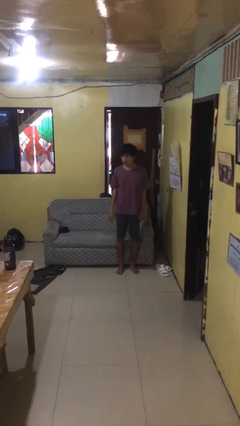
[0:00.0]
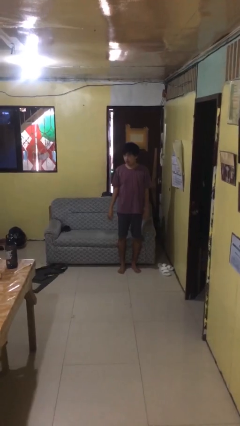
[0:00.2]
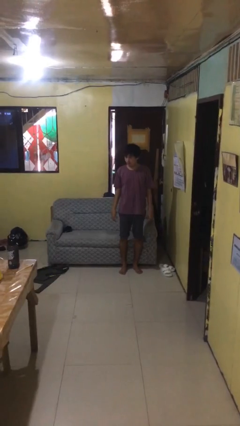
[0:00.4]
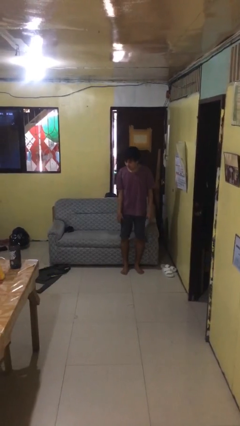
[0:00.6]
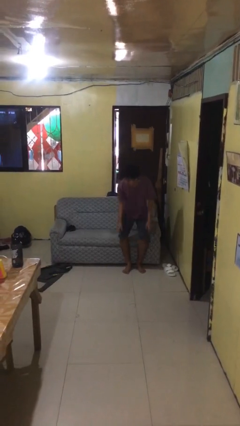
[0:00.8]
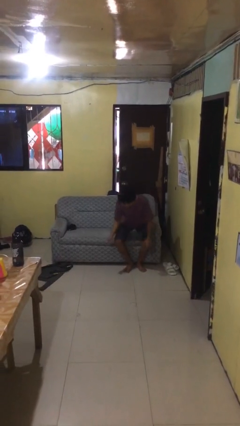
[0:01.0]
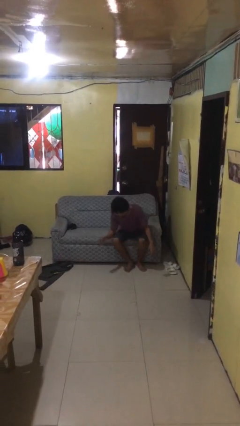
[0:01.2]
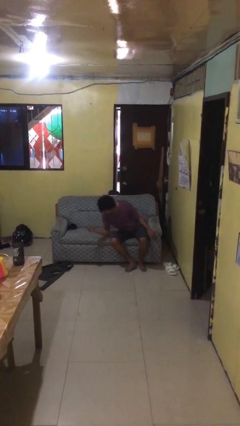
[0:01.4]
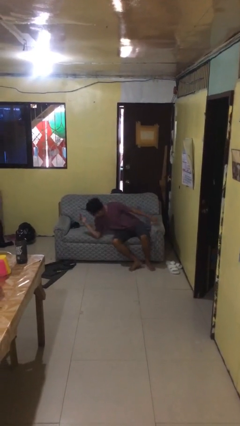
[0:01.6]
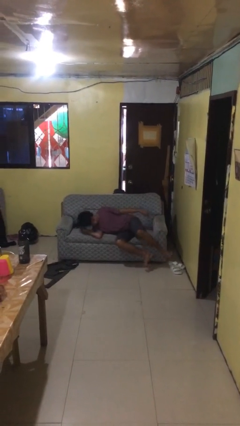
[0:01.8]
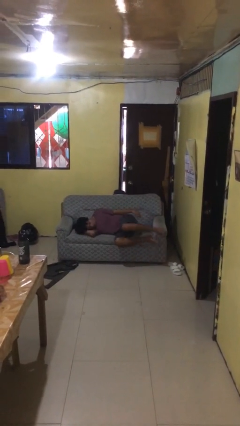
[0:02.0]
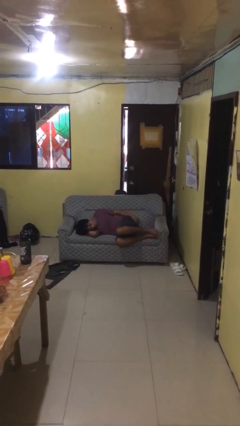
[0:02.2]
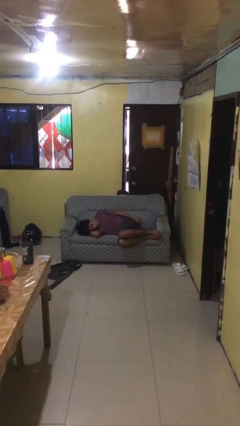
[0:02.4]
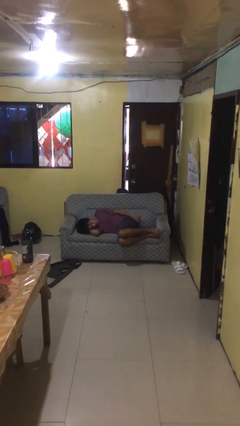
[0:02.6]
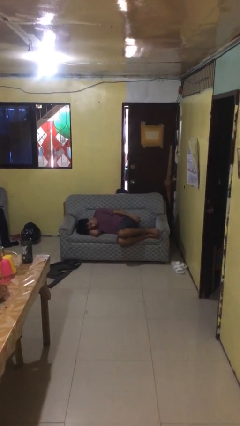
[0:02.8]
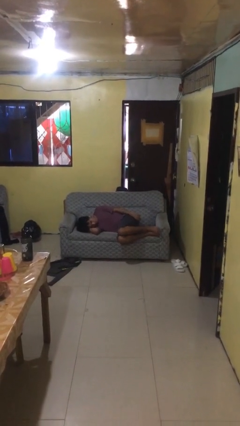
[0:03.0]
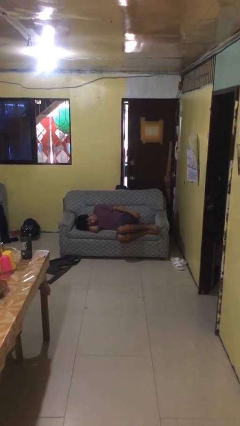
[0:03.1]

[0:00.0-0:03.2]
person lies down on couch

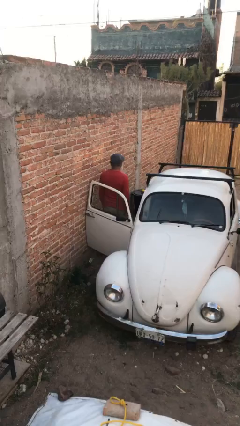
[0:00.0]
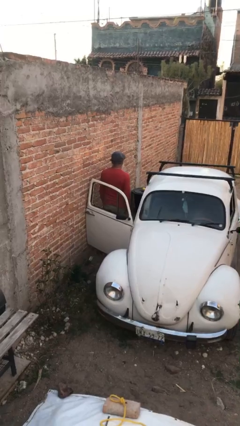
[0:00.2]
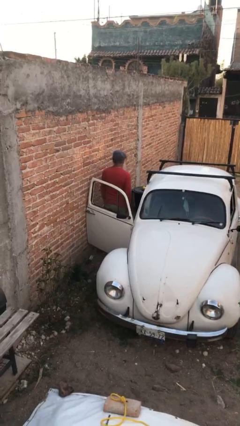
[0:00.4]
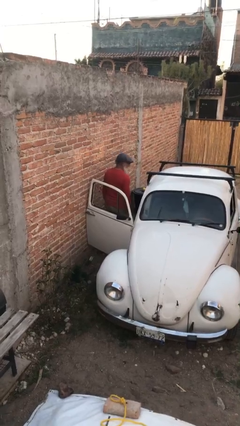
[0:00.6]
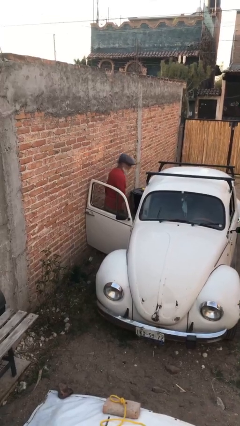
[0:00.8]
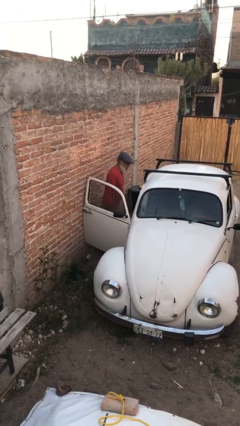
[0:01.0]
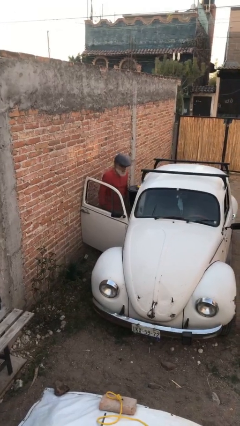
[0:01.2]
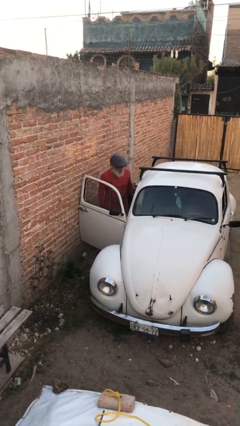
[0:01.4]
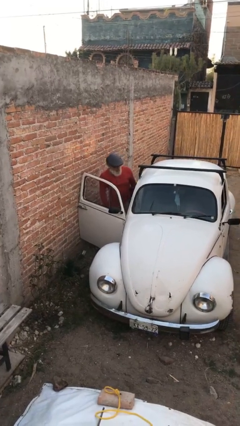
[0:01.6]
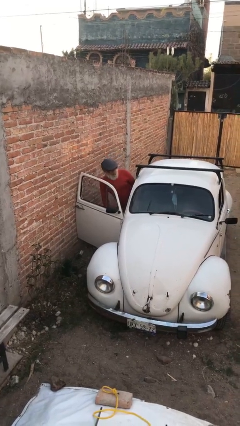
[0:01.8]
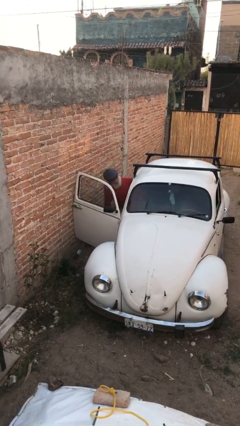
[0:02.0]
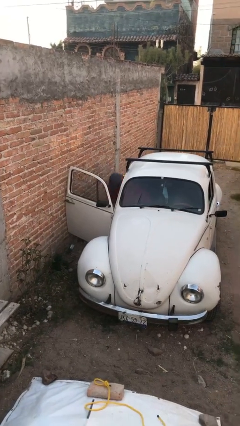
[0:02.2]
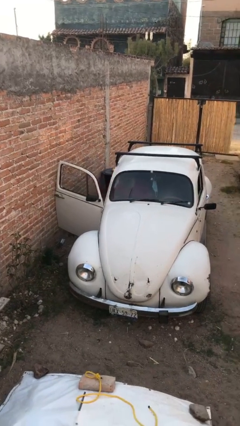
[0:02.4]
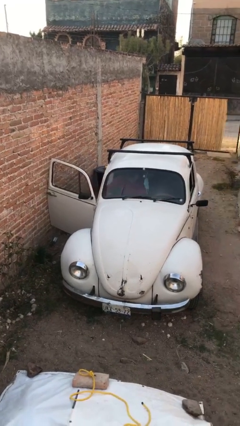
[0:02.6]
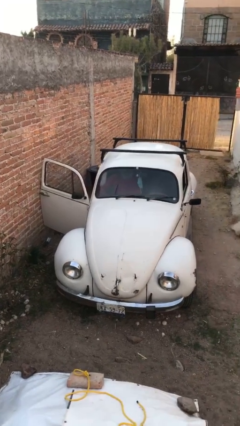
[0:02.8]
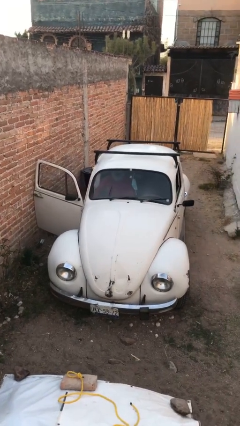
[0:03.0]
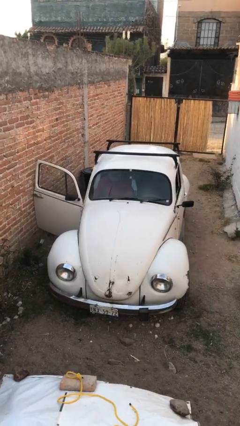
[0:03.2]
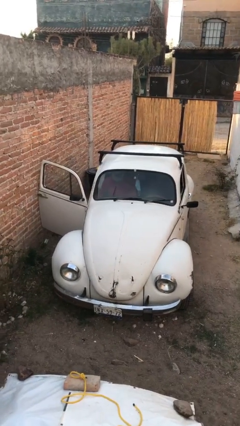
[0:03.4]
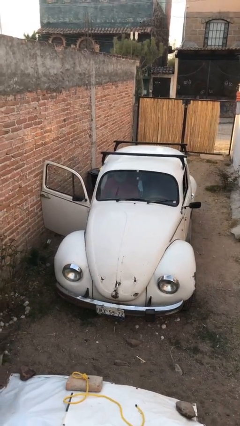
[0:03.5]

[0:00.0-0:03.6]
person enters car

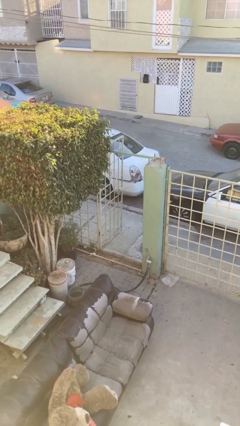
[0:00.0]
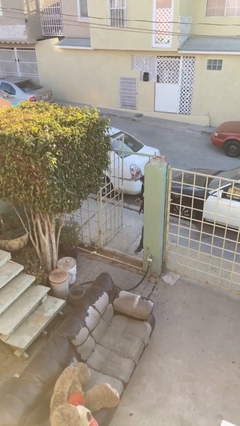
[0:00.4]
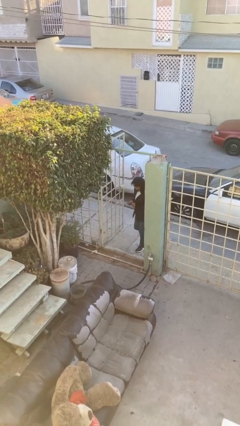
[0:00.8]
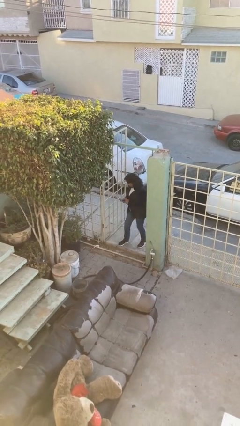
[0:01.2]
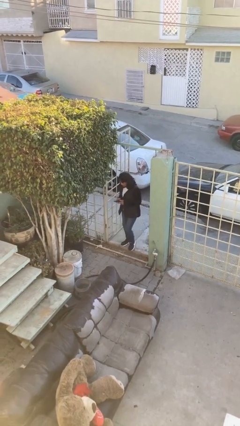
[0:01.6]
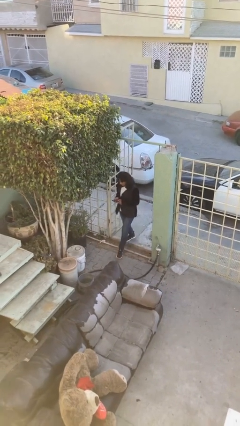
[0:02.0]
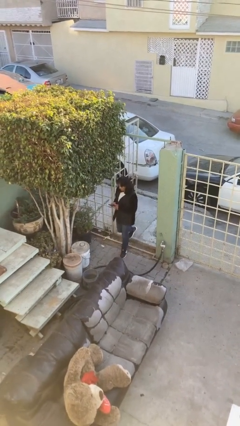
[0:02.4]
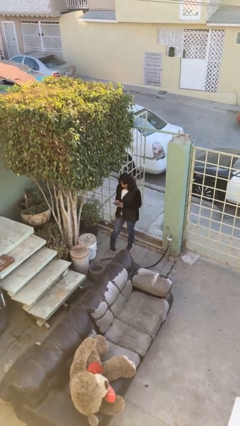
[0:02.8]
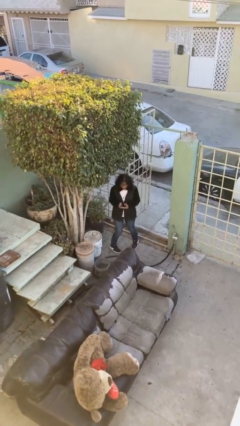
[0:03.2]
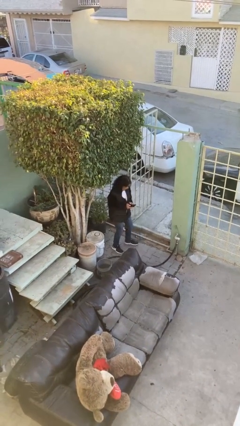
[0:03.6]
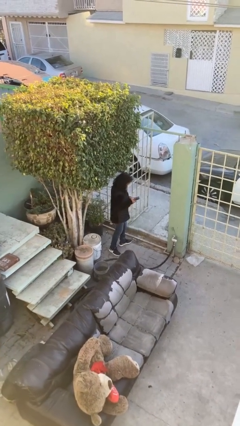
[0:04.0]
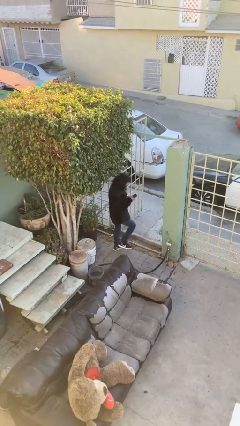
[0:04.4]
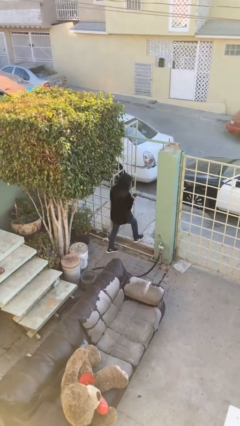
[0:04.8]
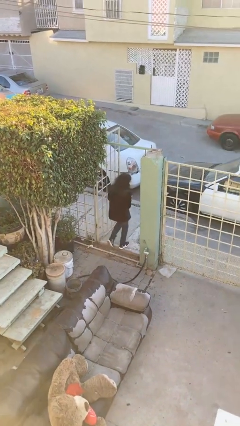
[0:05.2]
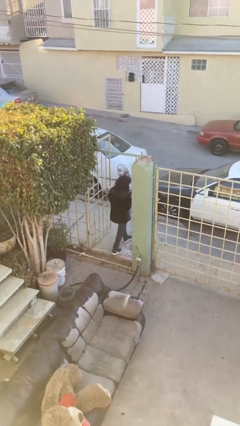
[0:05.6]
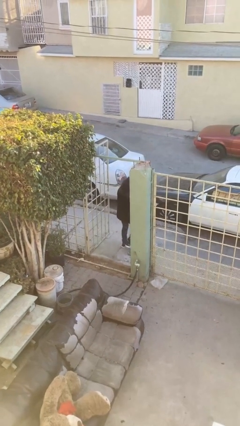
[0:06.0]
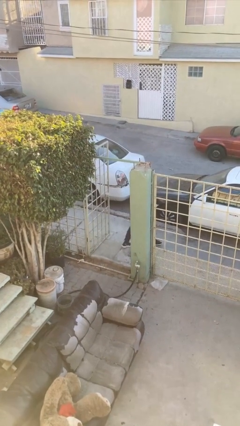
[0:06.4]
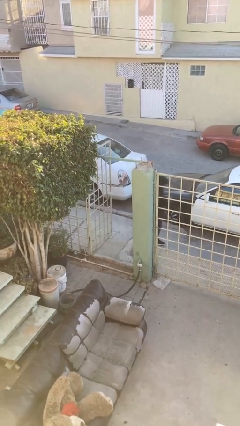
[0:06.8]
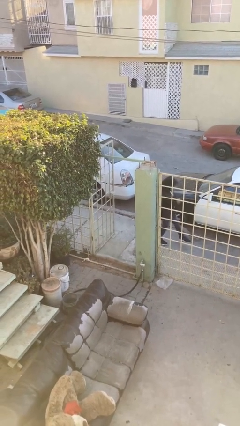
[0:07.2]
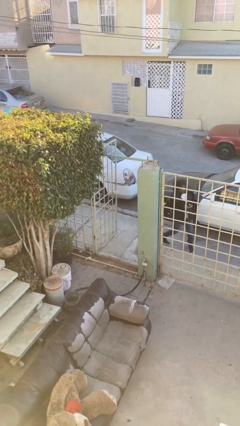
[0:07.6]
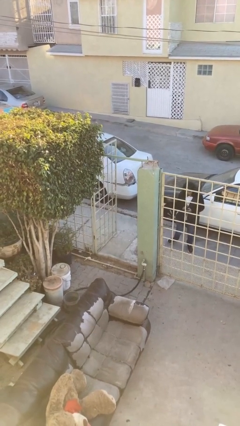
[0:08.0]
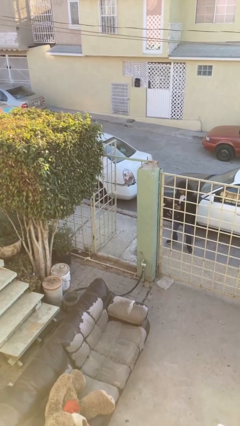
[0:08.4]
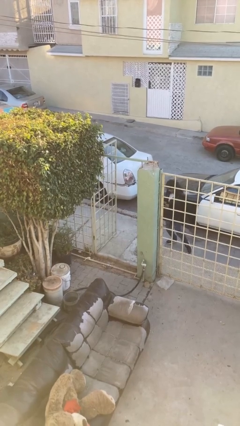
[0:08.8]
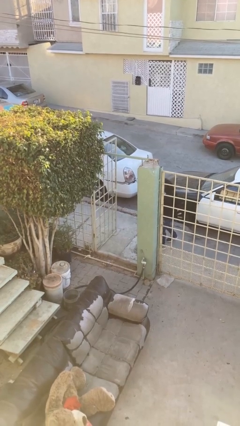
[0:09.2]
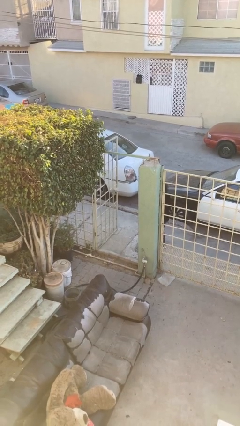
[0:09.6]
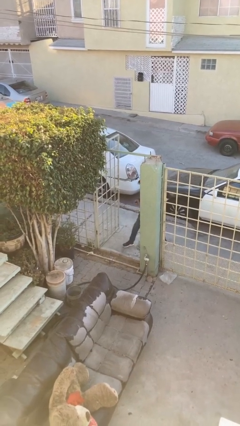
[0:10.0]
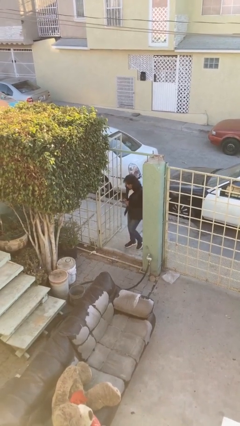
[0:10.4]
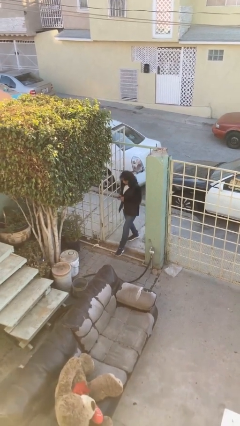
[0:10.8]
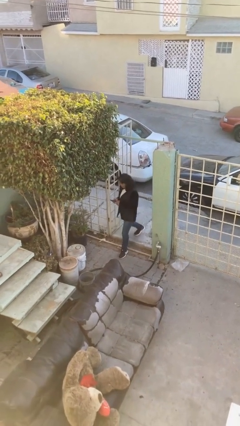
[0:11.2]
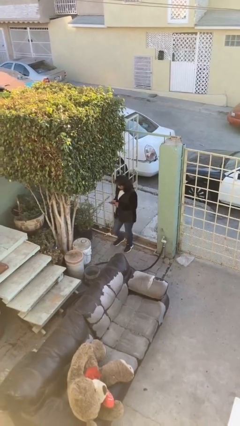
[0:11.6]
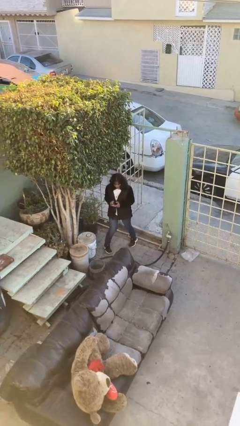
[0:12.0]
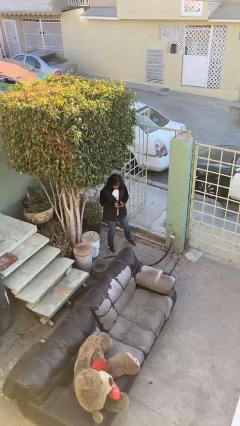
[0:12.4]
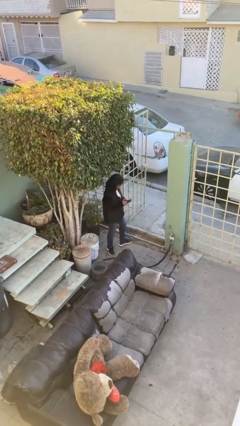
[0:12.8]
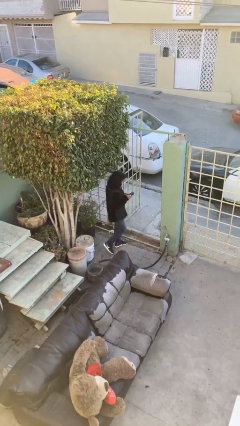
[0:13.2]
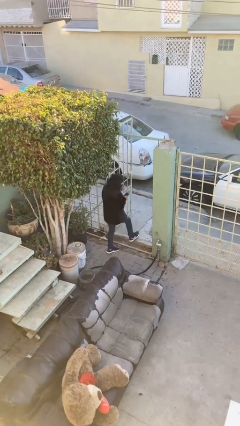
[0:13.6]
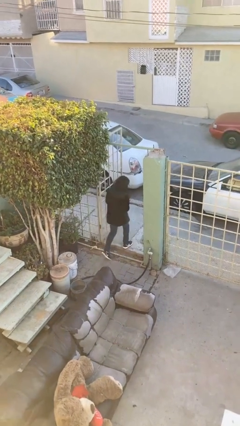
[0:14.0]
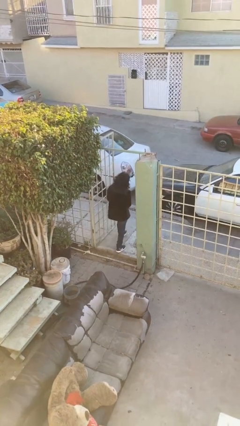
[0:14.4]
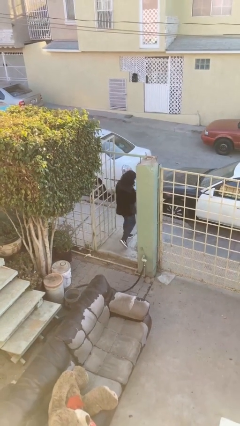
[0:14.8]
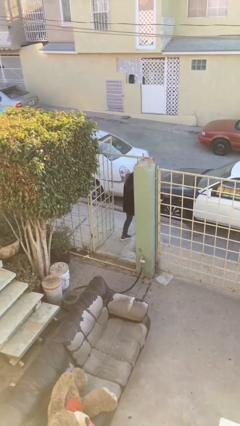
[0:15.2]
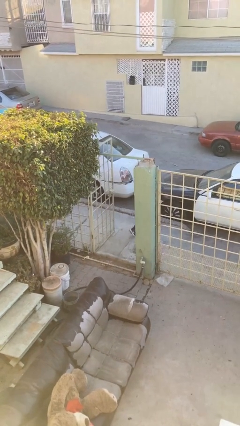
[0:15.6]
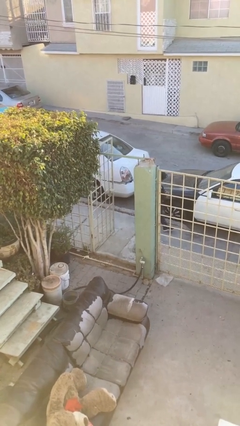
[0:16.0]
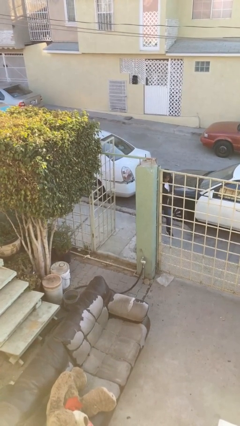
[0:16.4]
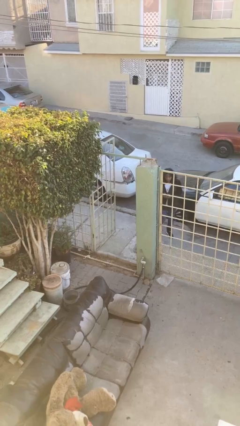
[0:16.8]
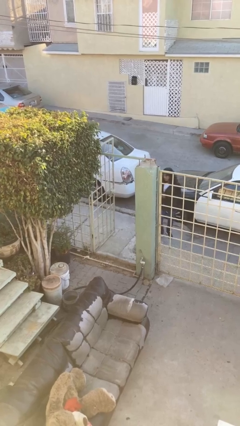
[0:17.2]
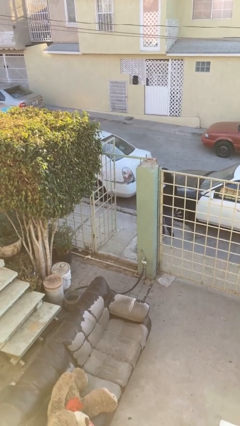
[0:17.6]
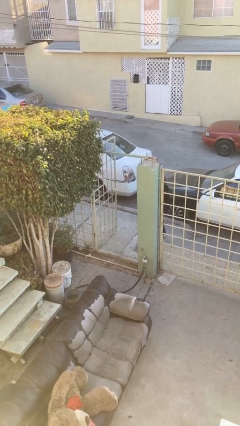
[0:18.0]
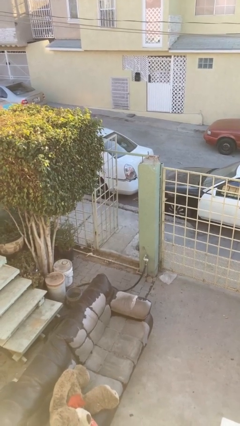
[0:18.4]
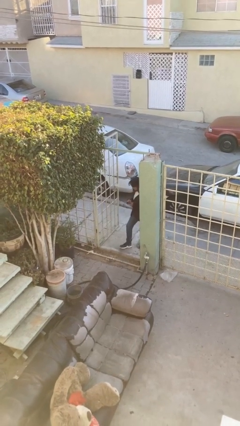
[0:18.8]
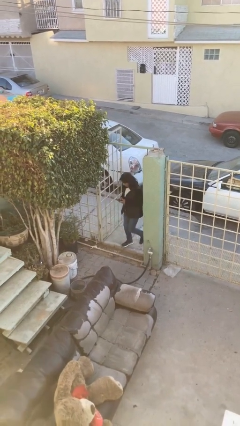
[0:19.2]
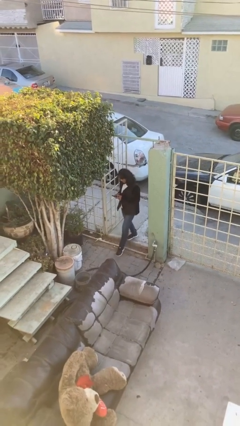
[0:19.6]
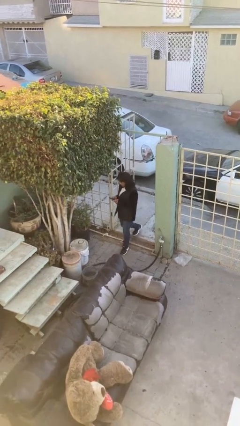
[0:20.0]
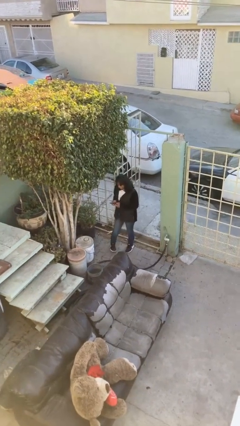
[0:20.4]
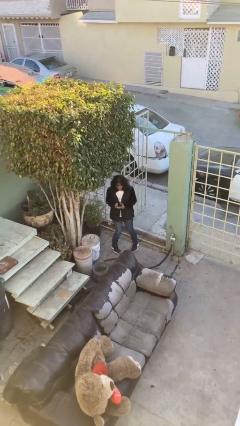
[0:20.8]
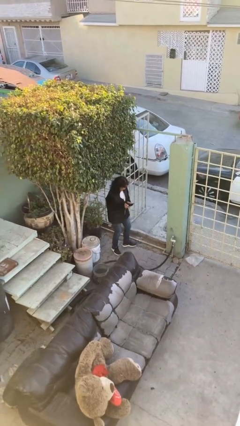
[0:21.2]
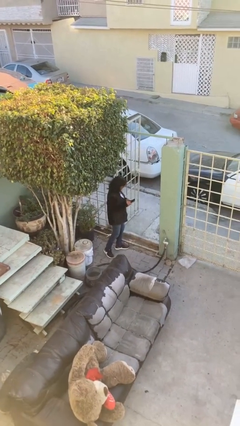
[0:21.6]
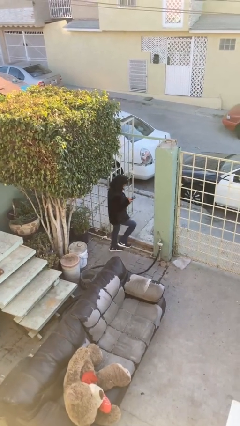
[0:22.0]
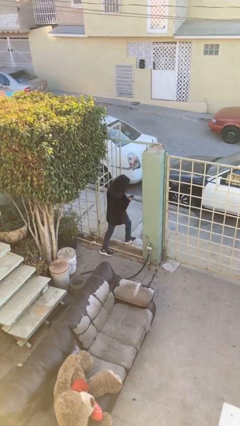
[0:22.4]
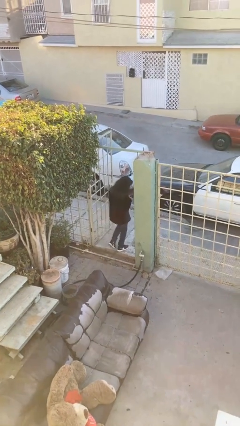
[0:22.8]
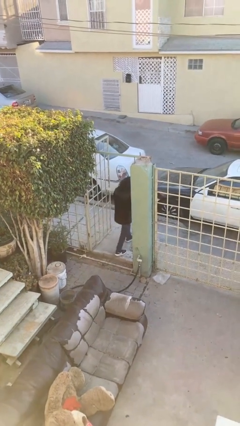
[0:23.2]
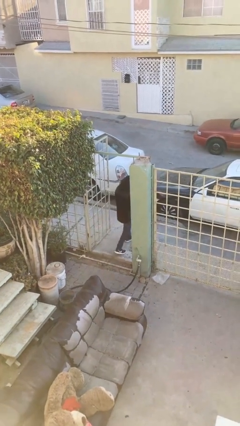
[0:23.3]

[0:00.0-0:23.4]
person texts on phone
